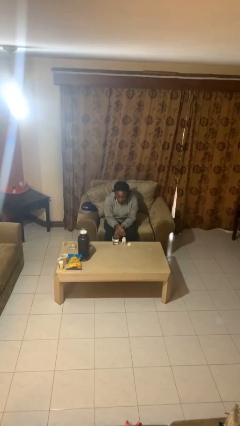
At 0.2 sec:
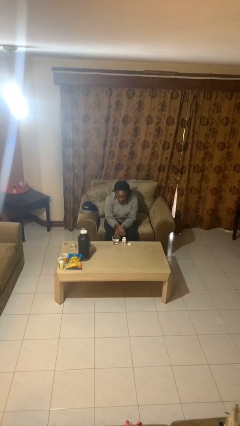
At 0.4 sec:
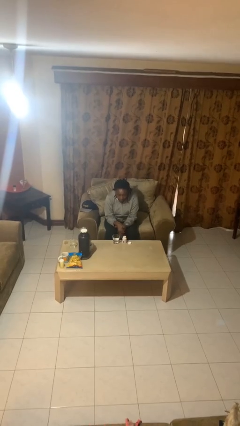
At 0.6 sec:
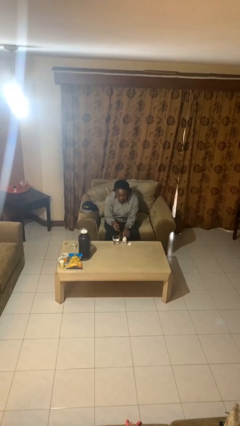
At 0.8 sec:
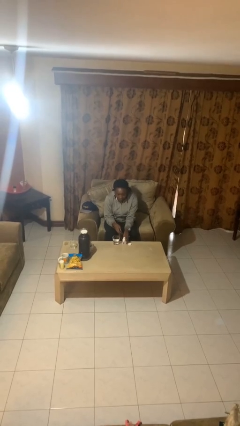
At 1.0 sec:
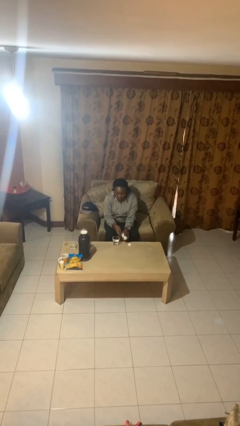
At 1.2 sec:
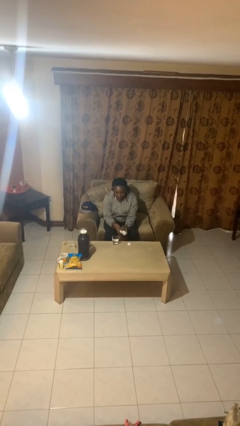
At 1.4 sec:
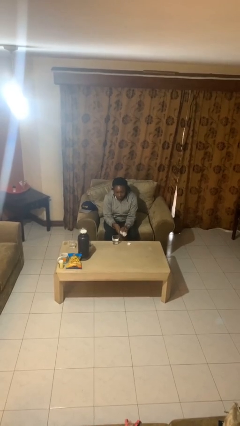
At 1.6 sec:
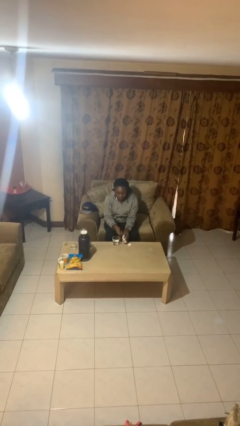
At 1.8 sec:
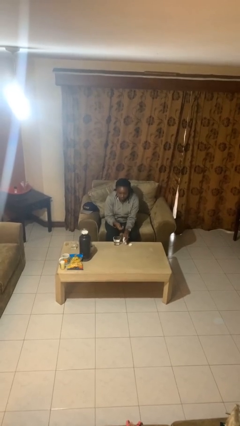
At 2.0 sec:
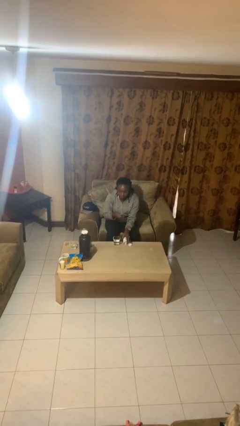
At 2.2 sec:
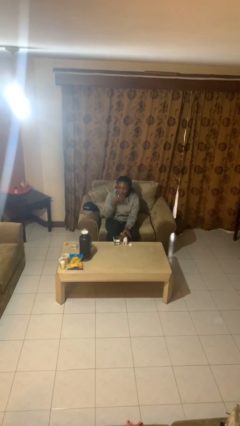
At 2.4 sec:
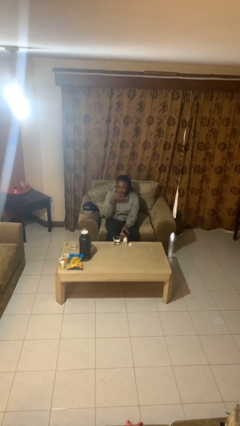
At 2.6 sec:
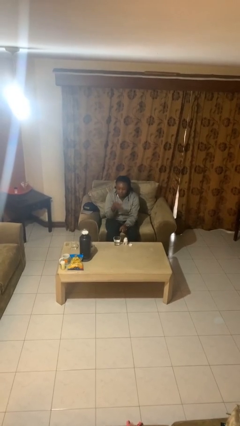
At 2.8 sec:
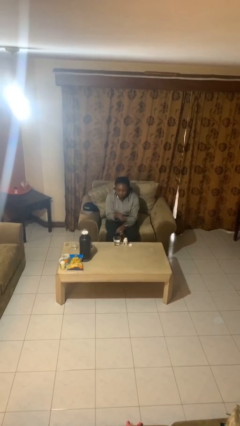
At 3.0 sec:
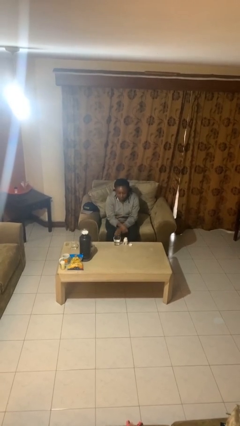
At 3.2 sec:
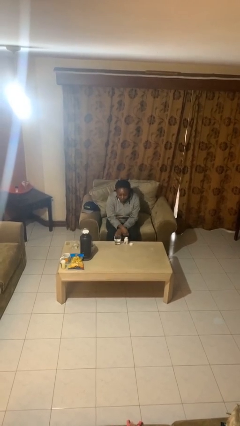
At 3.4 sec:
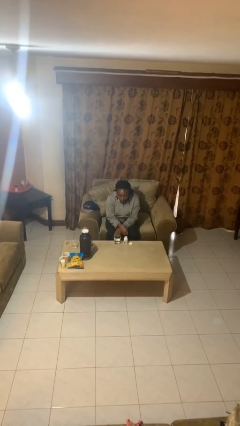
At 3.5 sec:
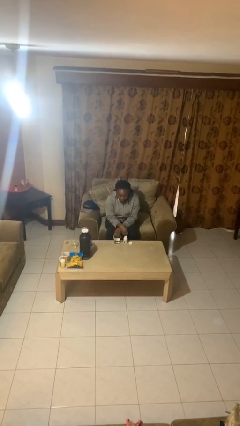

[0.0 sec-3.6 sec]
person takes medicine pills

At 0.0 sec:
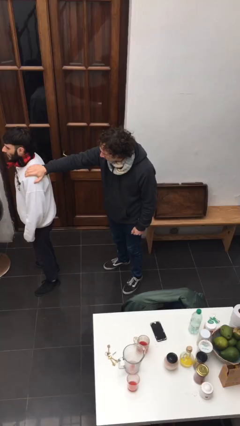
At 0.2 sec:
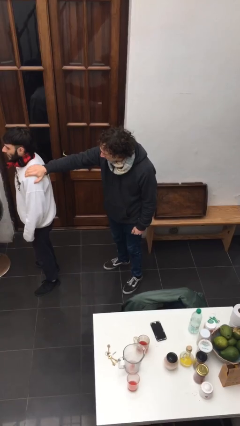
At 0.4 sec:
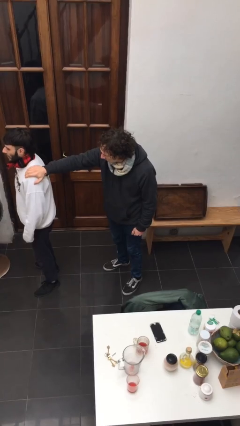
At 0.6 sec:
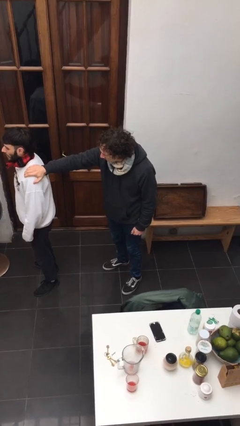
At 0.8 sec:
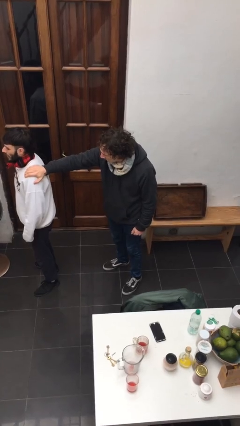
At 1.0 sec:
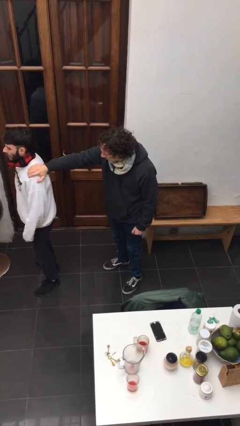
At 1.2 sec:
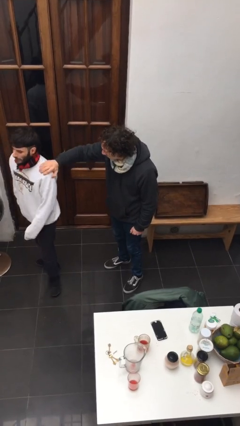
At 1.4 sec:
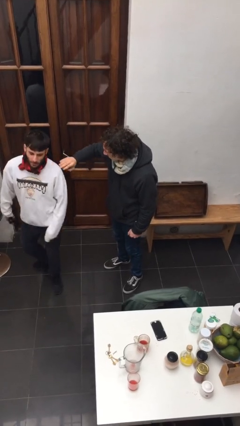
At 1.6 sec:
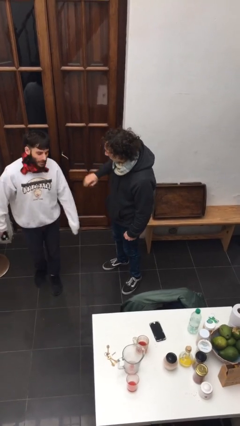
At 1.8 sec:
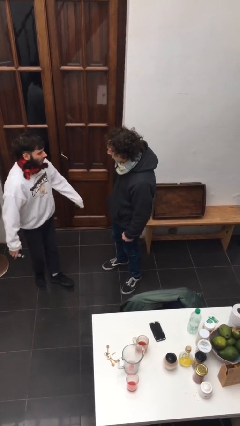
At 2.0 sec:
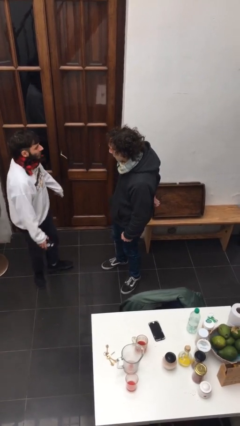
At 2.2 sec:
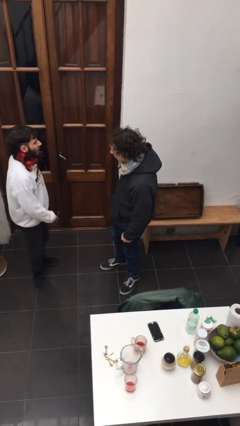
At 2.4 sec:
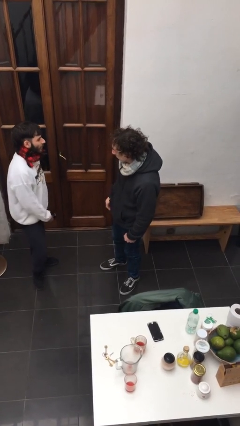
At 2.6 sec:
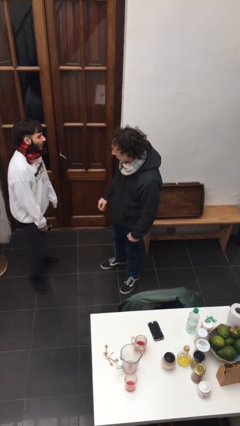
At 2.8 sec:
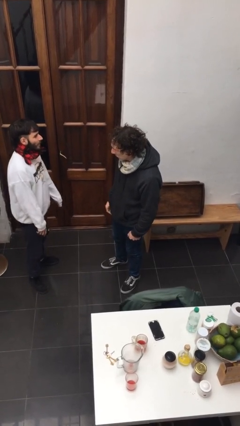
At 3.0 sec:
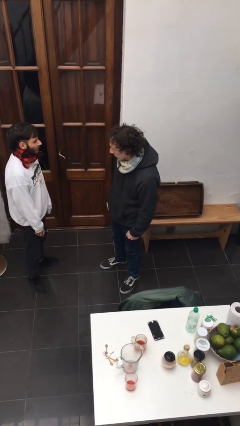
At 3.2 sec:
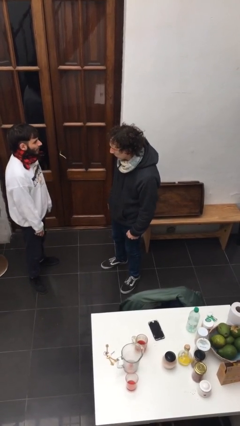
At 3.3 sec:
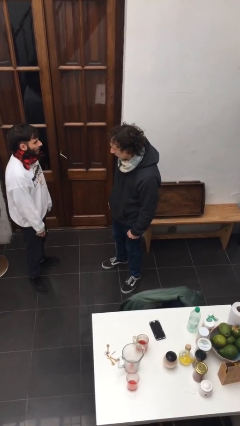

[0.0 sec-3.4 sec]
person spins person around

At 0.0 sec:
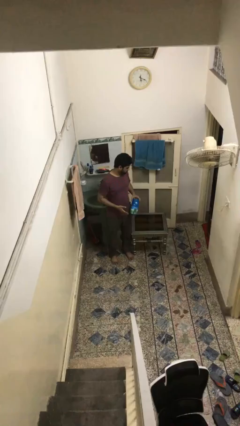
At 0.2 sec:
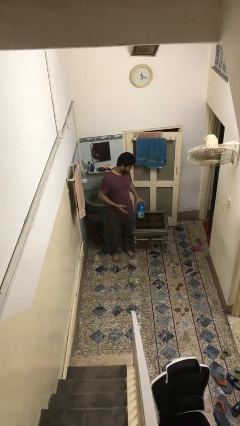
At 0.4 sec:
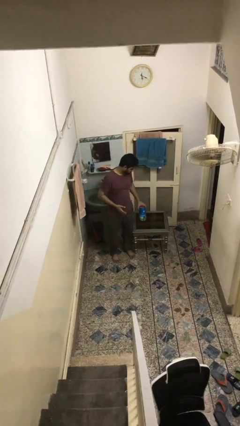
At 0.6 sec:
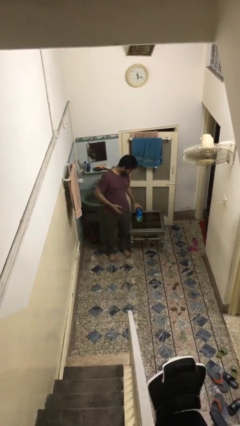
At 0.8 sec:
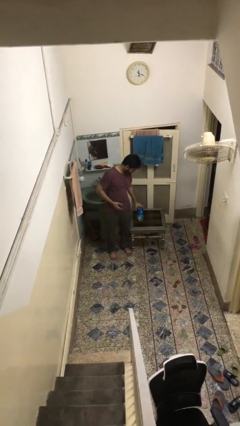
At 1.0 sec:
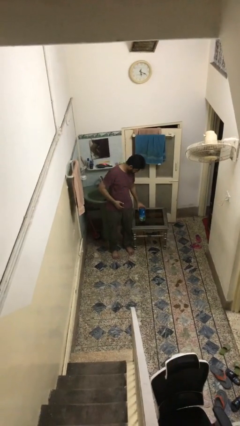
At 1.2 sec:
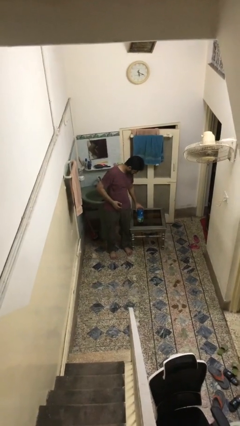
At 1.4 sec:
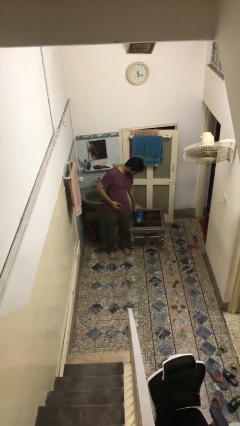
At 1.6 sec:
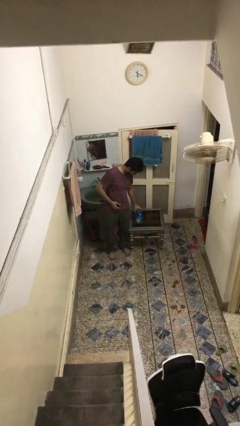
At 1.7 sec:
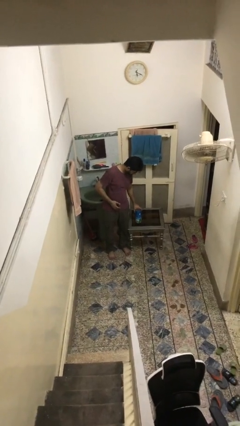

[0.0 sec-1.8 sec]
person puts down object on table

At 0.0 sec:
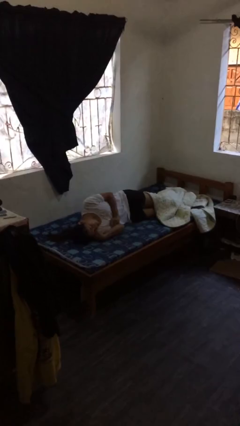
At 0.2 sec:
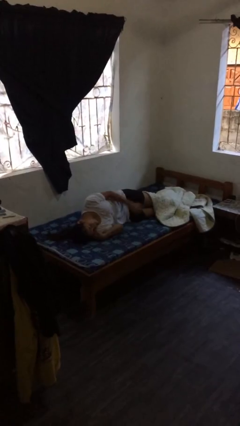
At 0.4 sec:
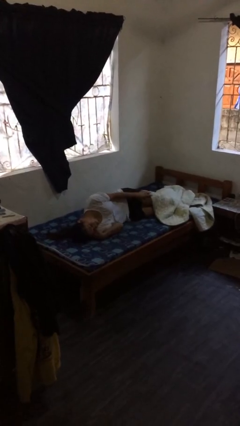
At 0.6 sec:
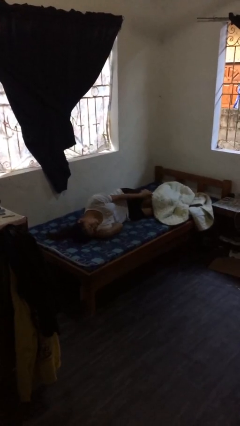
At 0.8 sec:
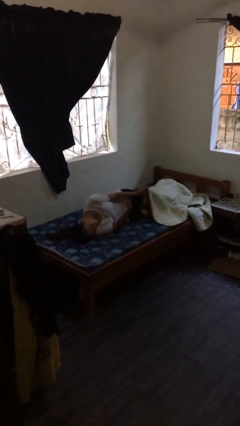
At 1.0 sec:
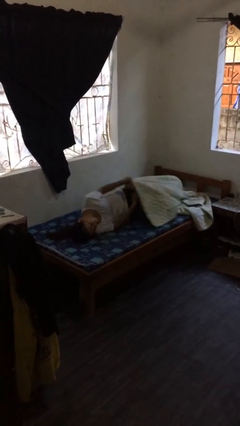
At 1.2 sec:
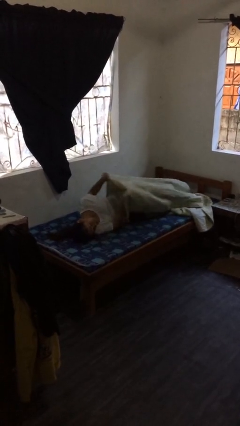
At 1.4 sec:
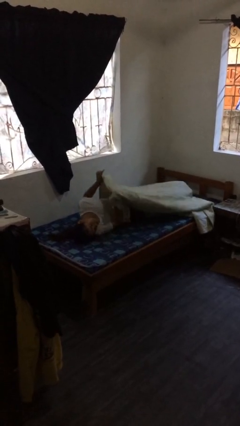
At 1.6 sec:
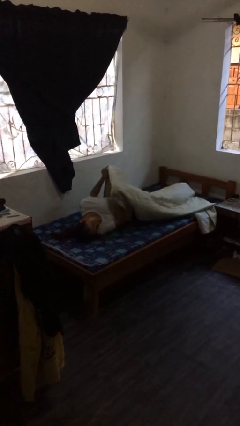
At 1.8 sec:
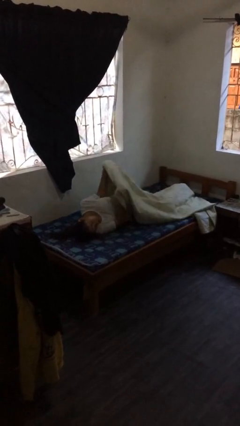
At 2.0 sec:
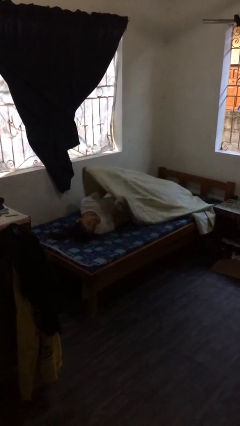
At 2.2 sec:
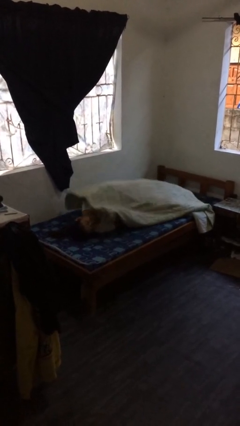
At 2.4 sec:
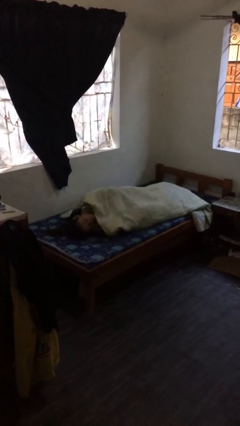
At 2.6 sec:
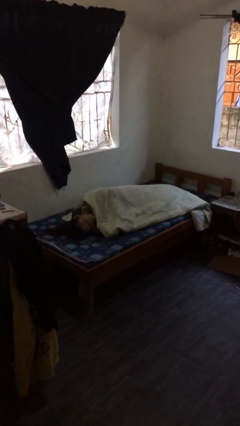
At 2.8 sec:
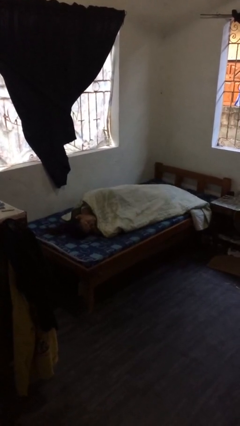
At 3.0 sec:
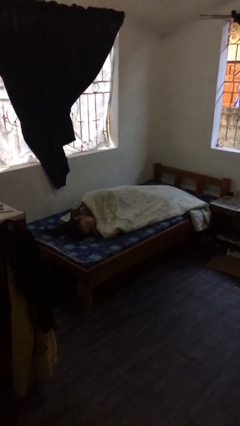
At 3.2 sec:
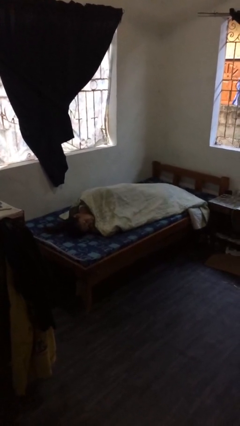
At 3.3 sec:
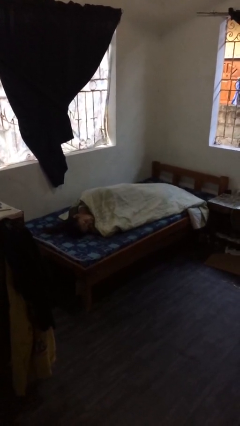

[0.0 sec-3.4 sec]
person covers with bedsheets

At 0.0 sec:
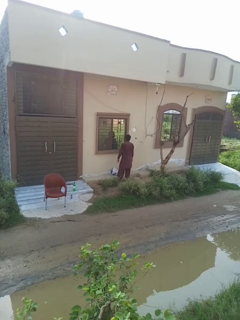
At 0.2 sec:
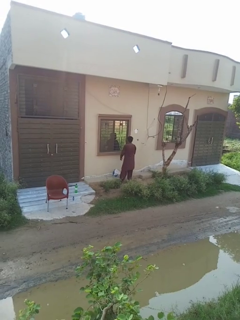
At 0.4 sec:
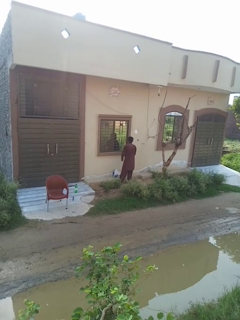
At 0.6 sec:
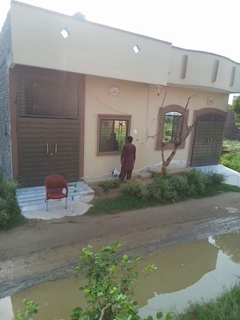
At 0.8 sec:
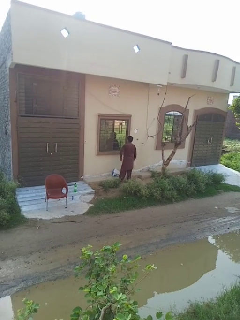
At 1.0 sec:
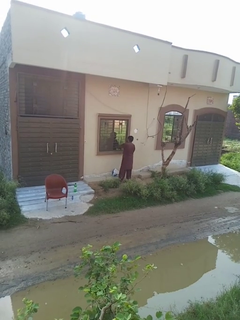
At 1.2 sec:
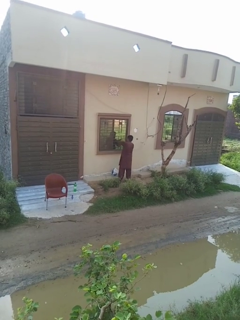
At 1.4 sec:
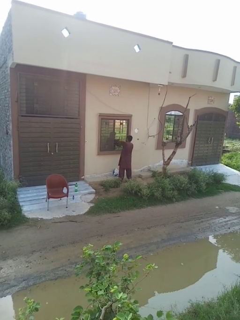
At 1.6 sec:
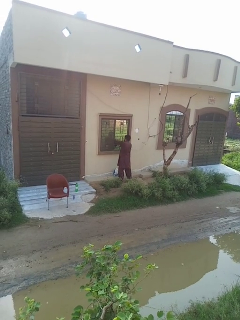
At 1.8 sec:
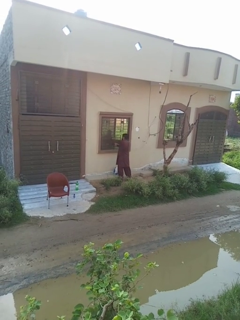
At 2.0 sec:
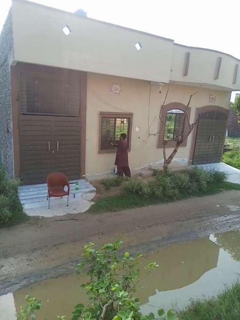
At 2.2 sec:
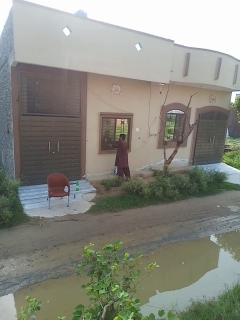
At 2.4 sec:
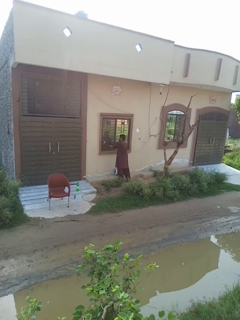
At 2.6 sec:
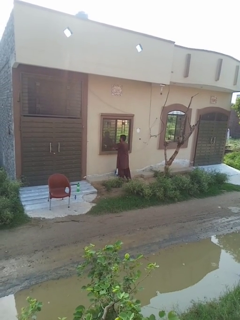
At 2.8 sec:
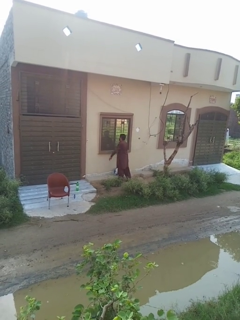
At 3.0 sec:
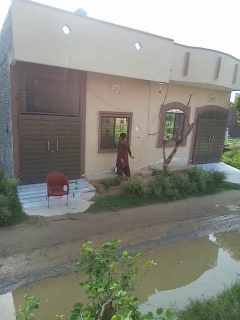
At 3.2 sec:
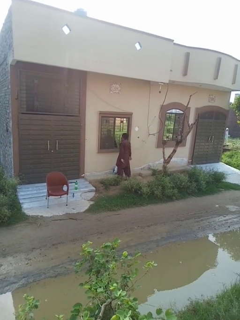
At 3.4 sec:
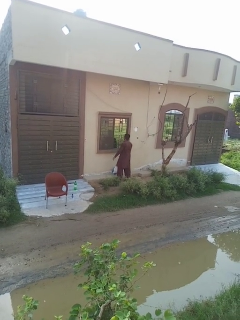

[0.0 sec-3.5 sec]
person closes home window

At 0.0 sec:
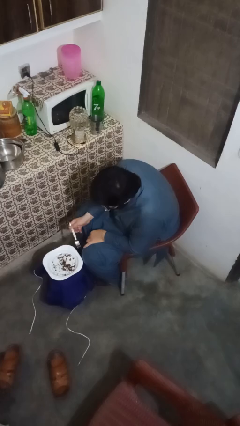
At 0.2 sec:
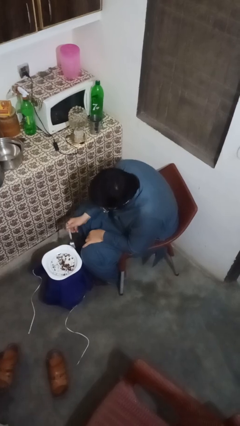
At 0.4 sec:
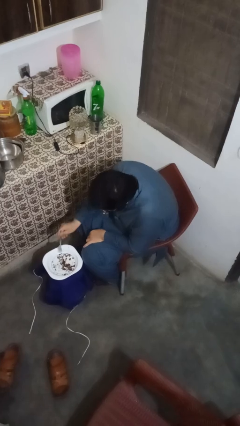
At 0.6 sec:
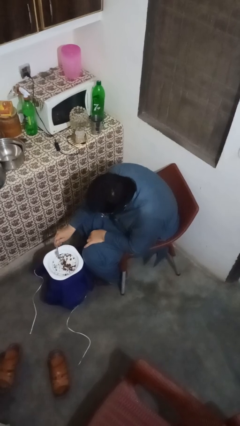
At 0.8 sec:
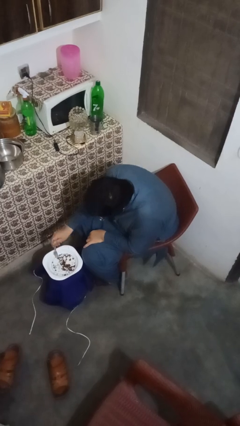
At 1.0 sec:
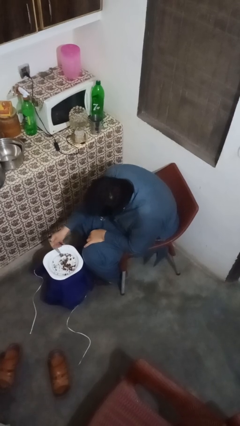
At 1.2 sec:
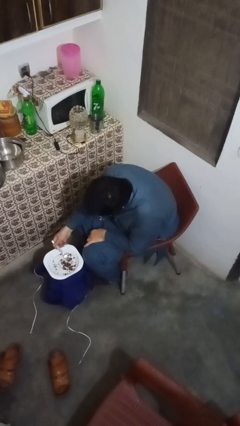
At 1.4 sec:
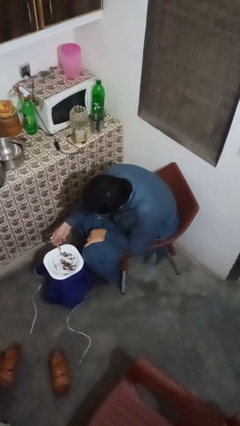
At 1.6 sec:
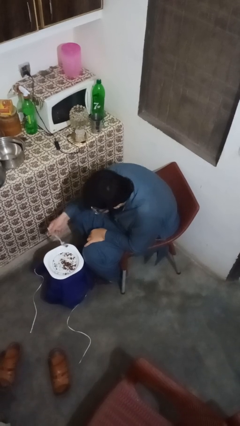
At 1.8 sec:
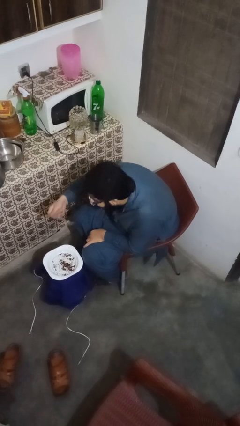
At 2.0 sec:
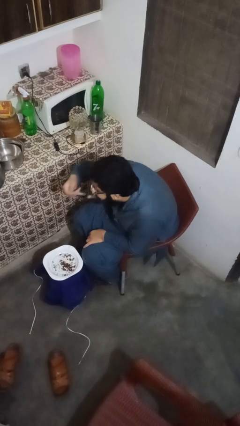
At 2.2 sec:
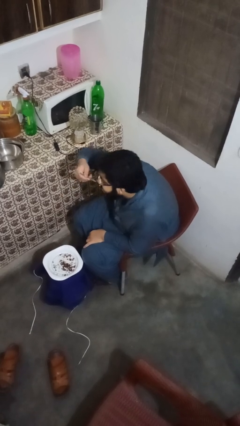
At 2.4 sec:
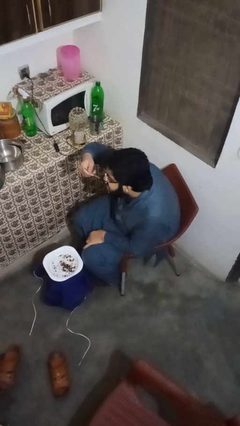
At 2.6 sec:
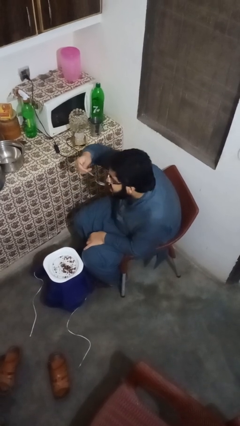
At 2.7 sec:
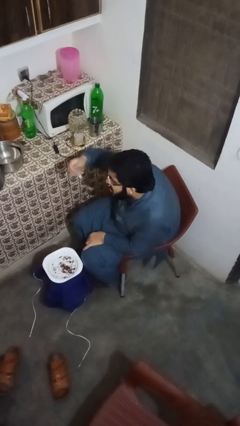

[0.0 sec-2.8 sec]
person eats with utensil
